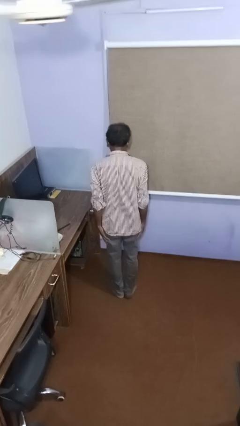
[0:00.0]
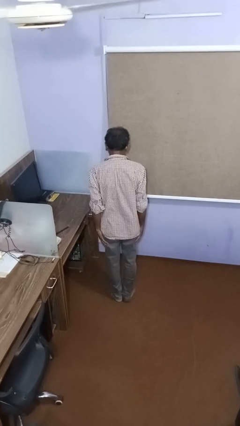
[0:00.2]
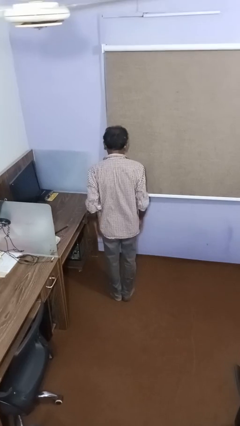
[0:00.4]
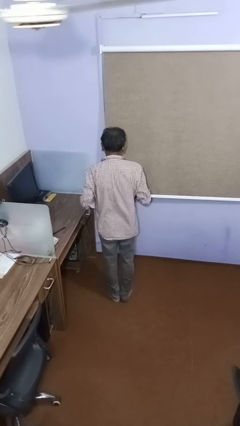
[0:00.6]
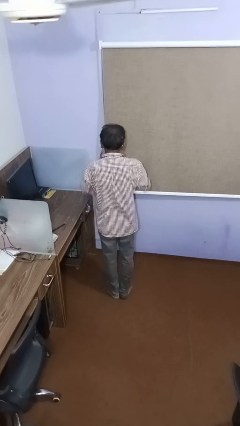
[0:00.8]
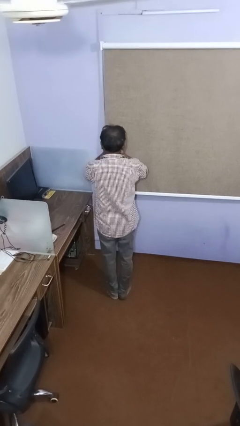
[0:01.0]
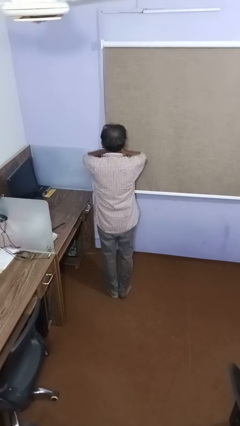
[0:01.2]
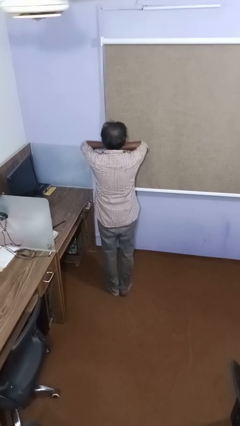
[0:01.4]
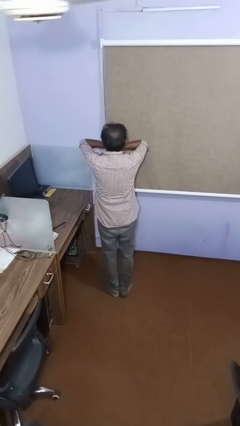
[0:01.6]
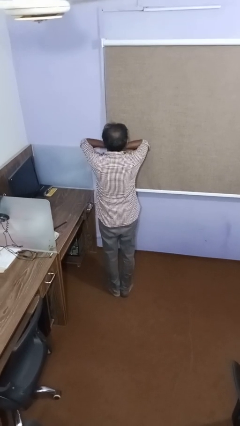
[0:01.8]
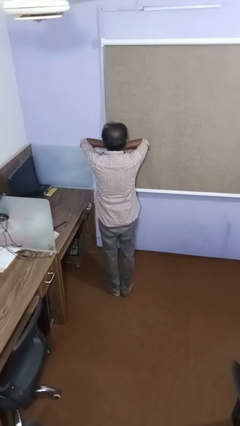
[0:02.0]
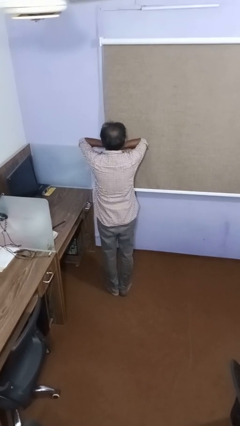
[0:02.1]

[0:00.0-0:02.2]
person covers face with hands

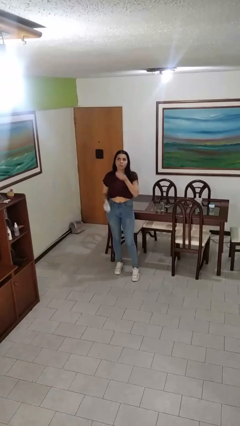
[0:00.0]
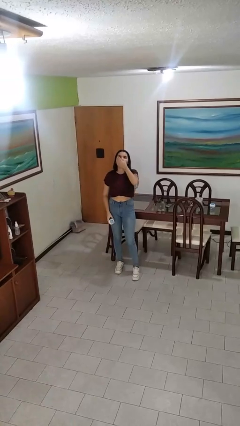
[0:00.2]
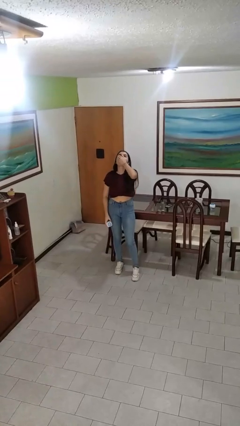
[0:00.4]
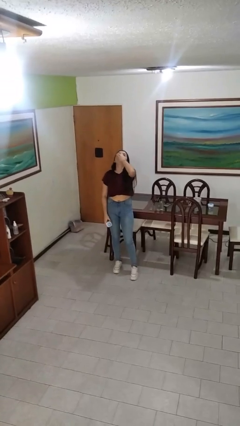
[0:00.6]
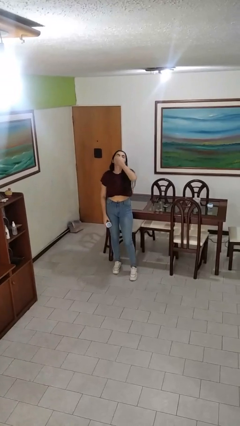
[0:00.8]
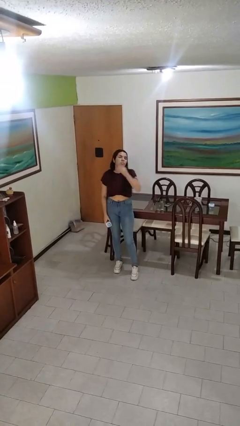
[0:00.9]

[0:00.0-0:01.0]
person takes medicine pills

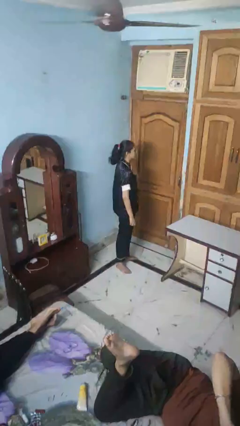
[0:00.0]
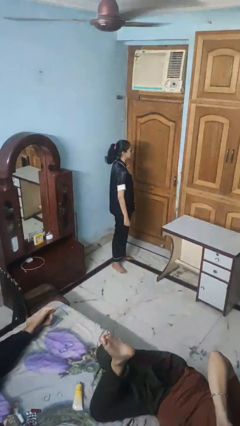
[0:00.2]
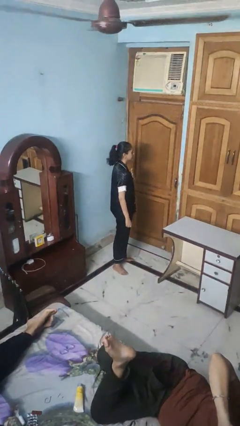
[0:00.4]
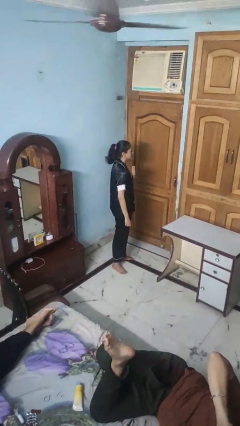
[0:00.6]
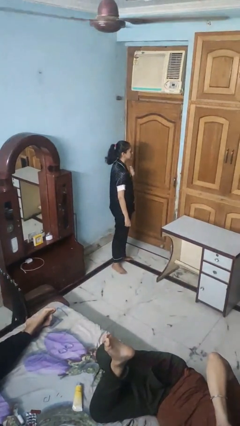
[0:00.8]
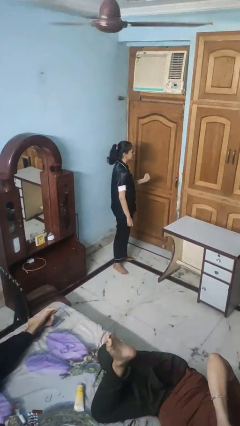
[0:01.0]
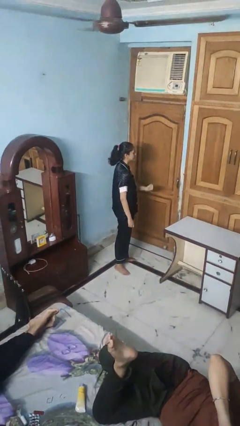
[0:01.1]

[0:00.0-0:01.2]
person drums on chest

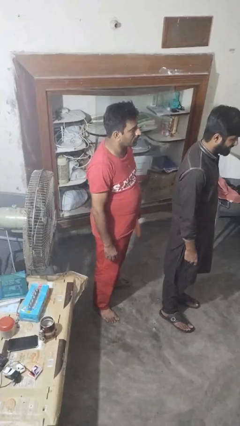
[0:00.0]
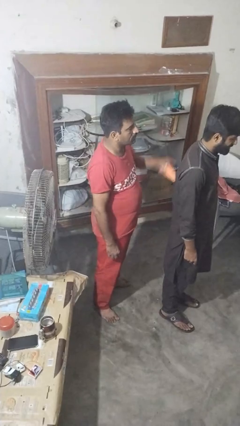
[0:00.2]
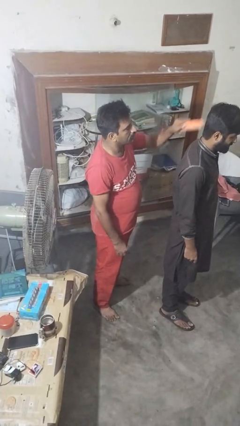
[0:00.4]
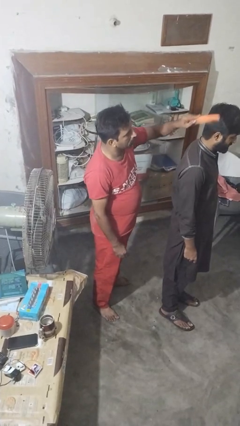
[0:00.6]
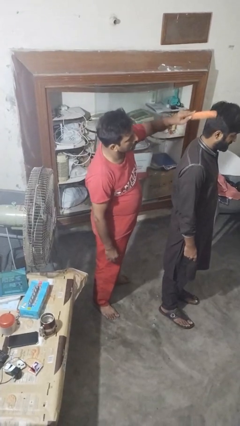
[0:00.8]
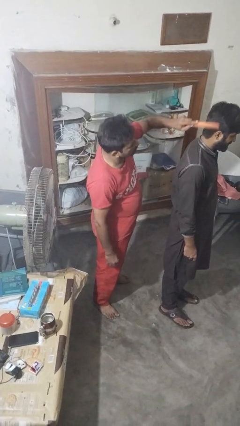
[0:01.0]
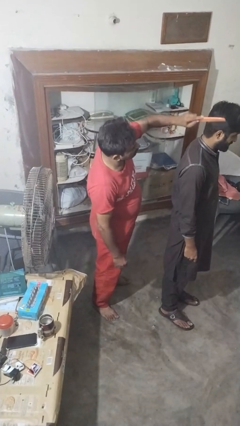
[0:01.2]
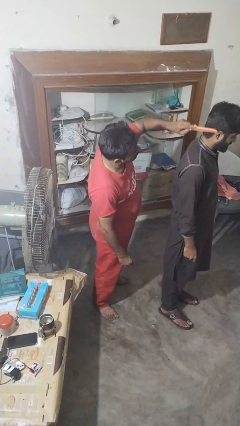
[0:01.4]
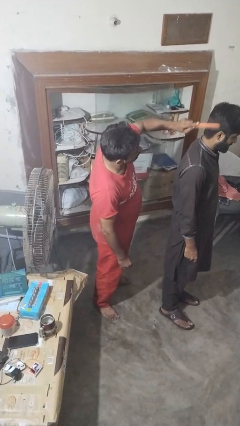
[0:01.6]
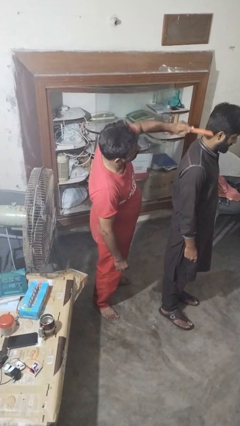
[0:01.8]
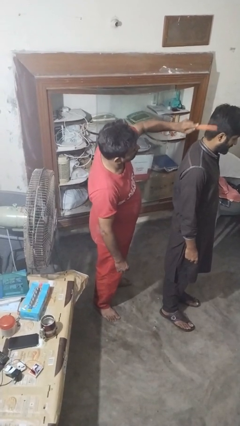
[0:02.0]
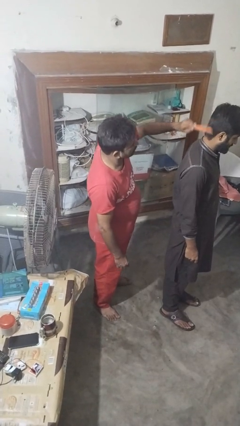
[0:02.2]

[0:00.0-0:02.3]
person brushes hair of person

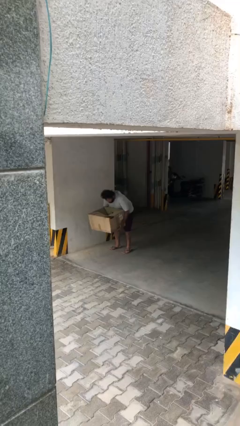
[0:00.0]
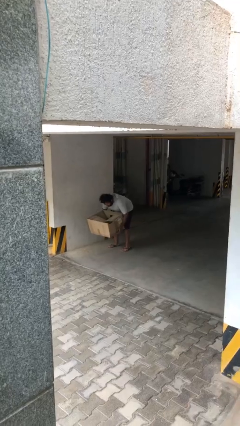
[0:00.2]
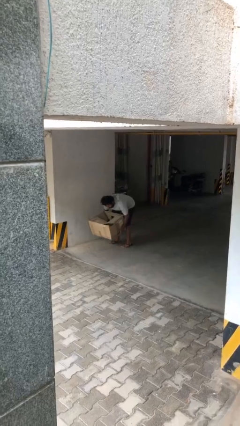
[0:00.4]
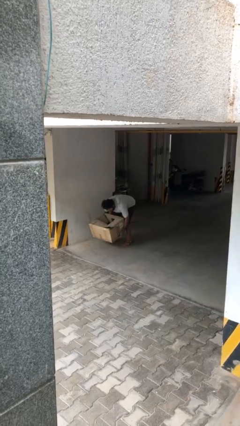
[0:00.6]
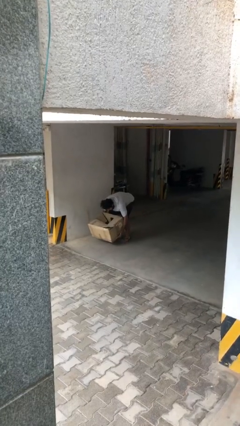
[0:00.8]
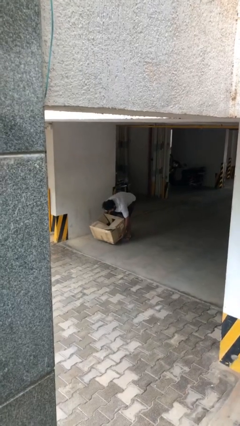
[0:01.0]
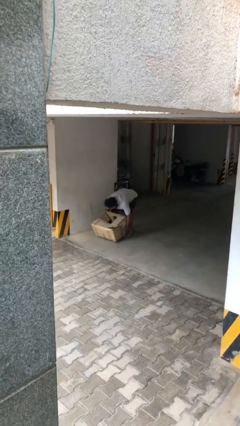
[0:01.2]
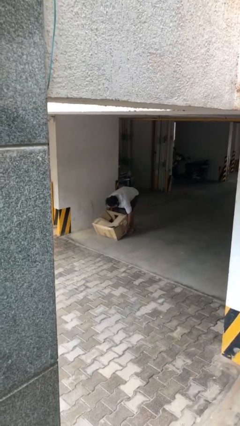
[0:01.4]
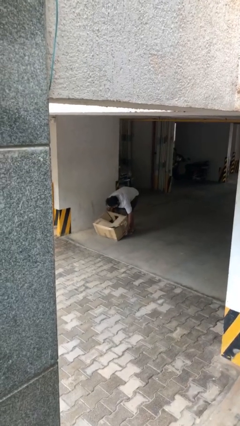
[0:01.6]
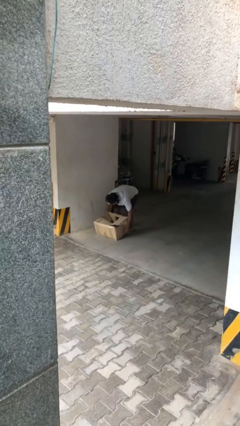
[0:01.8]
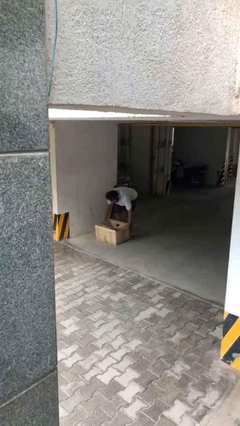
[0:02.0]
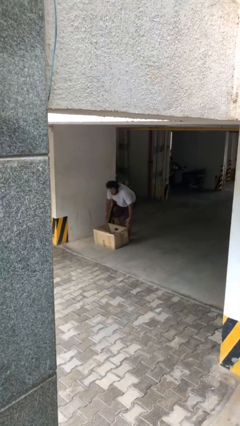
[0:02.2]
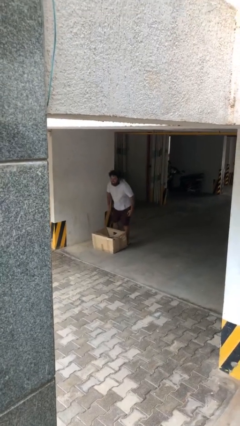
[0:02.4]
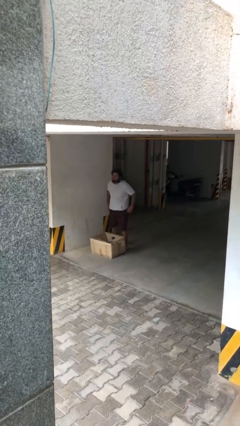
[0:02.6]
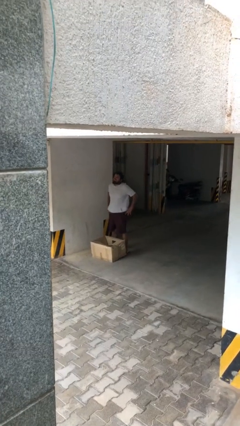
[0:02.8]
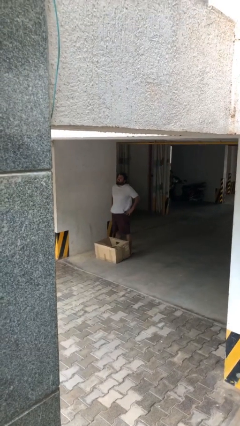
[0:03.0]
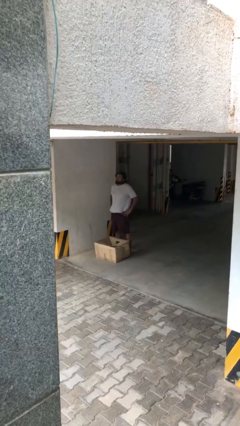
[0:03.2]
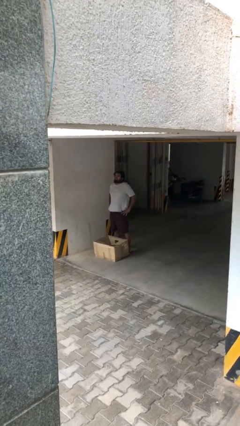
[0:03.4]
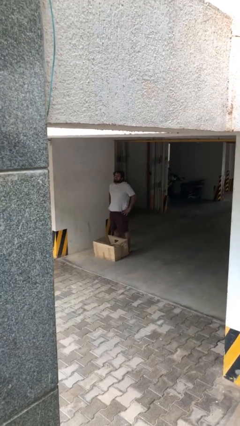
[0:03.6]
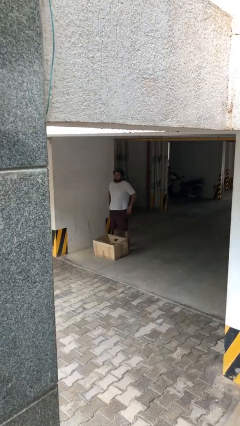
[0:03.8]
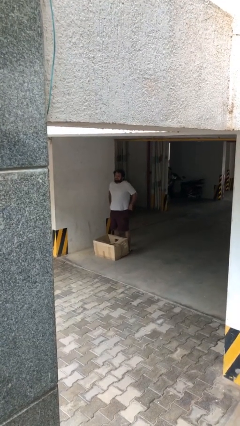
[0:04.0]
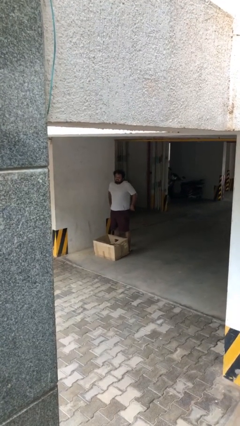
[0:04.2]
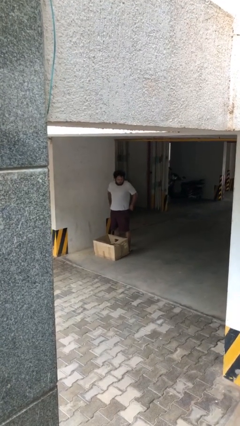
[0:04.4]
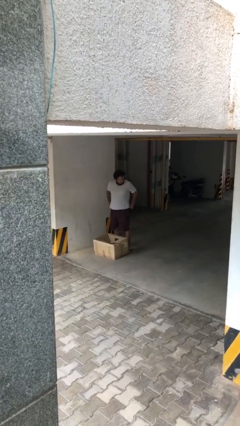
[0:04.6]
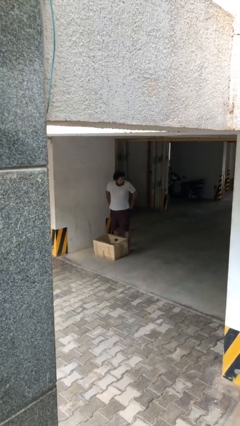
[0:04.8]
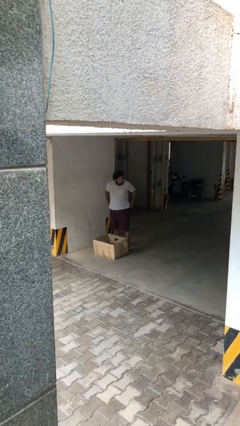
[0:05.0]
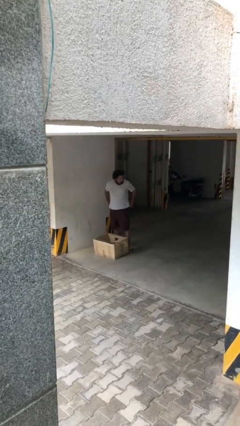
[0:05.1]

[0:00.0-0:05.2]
person puts down object on floor

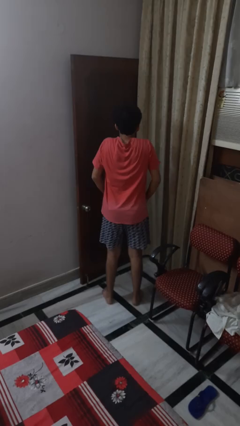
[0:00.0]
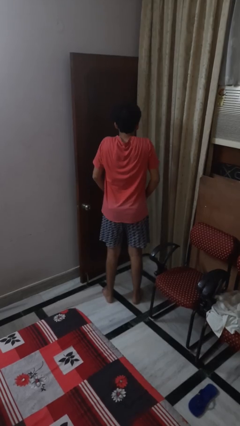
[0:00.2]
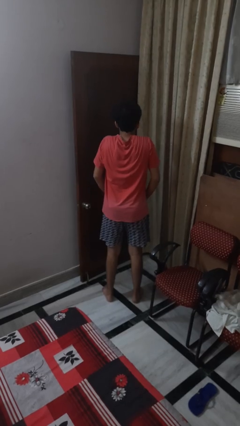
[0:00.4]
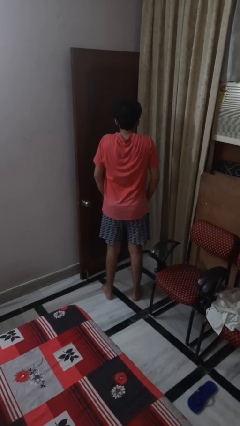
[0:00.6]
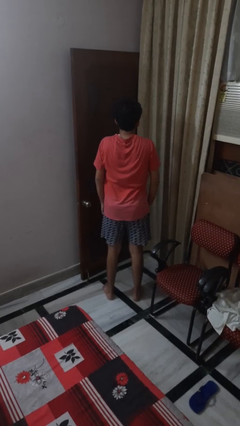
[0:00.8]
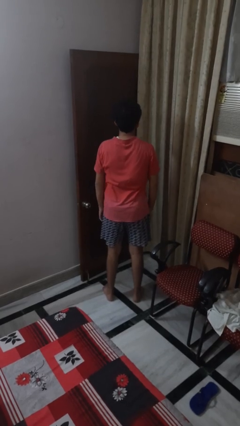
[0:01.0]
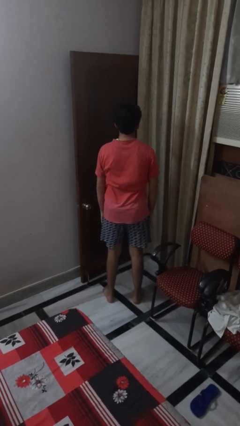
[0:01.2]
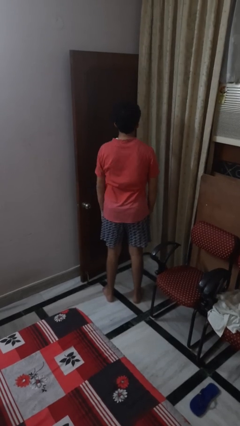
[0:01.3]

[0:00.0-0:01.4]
person shrugs

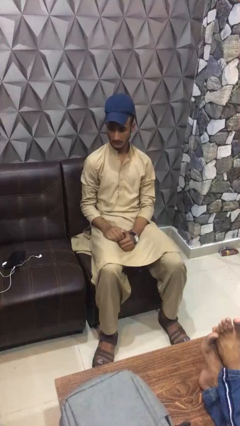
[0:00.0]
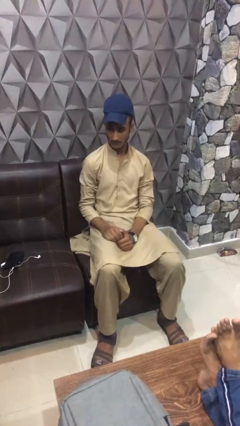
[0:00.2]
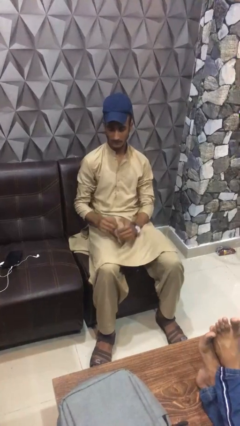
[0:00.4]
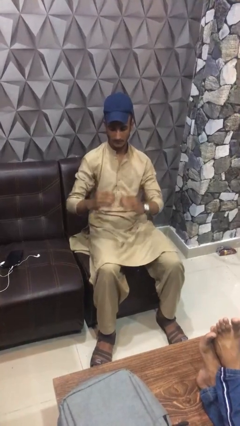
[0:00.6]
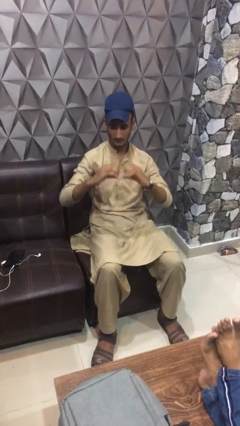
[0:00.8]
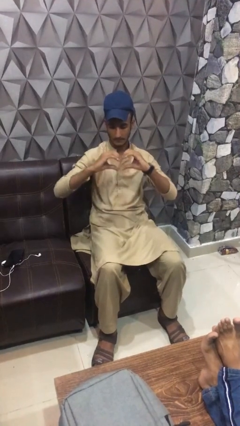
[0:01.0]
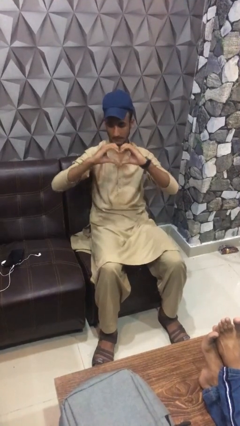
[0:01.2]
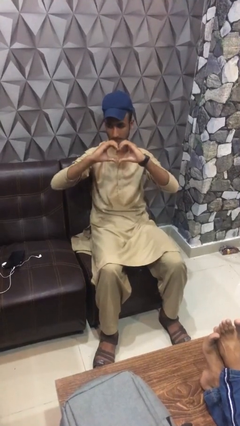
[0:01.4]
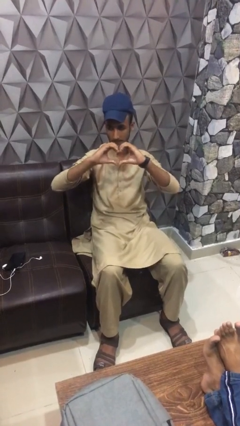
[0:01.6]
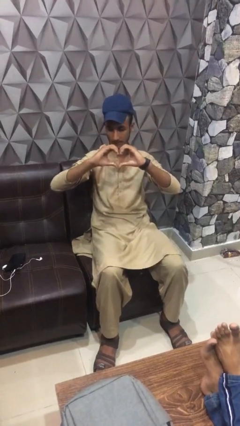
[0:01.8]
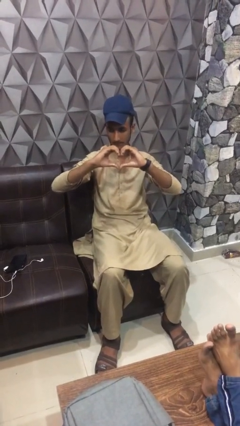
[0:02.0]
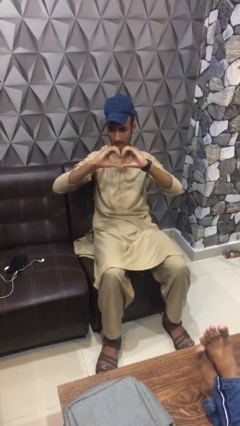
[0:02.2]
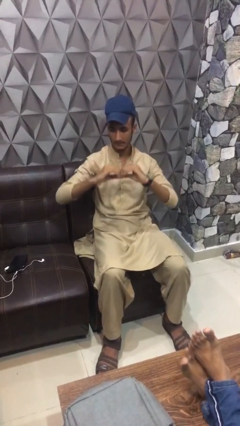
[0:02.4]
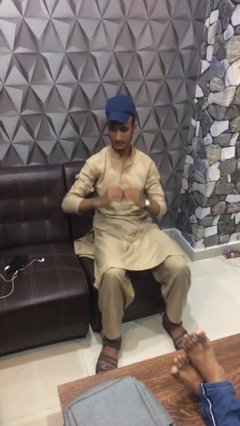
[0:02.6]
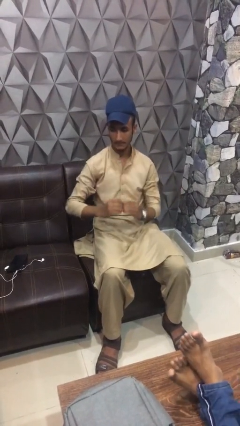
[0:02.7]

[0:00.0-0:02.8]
person gestures heart

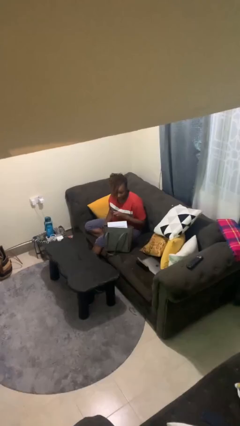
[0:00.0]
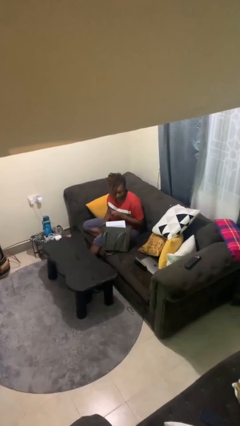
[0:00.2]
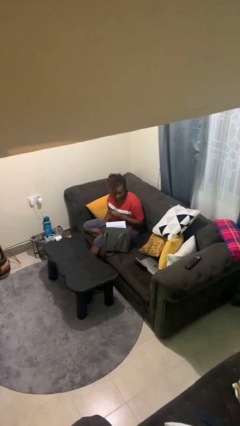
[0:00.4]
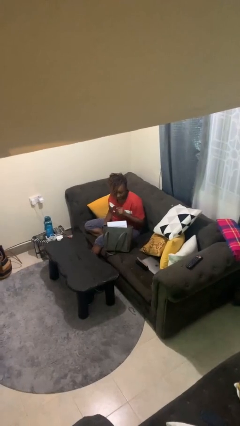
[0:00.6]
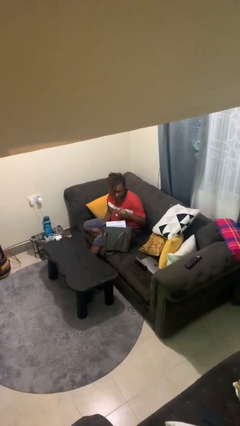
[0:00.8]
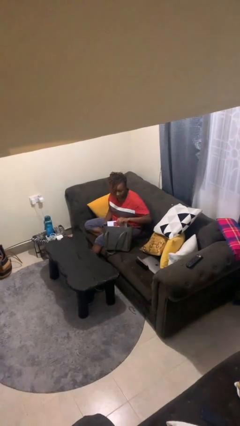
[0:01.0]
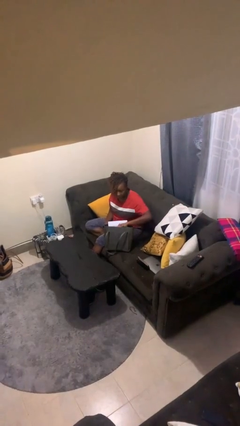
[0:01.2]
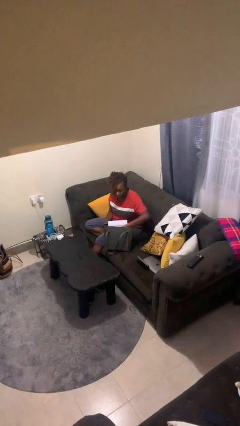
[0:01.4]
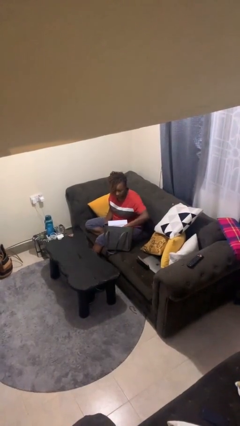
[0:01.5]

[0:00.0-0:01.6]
person puts object into purse
